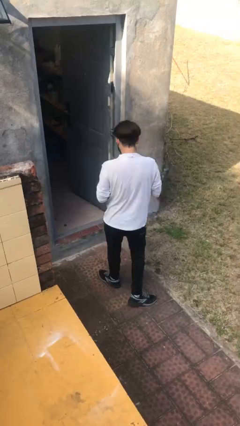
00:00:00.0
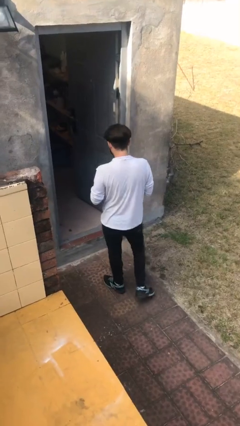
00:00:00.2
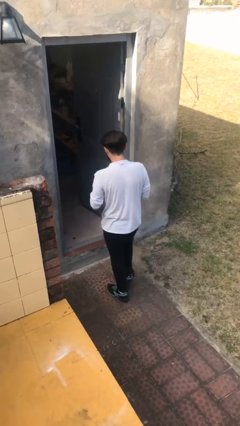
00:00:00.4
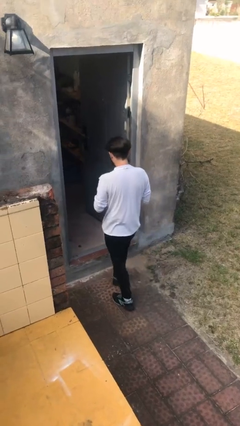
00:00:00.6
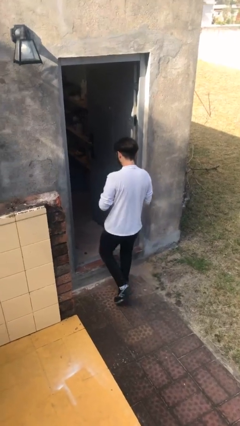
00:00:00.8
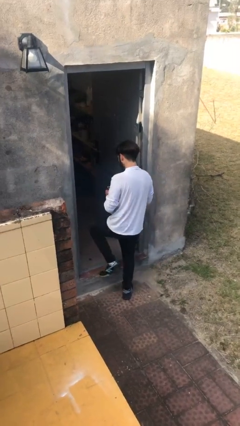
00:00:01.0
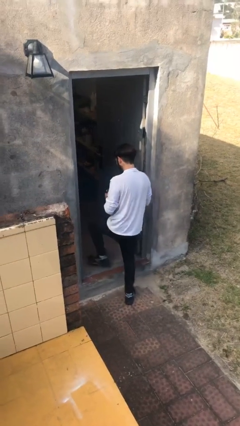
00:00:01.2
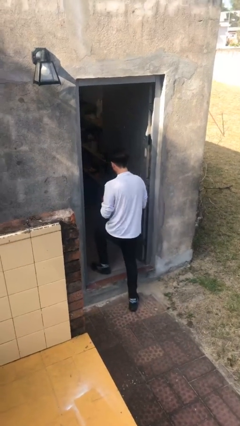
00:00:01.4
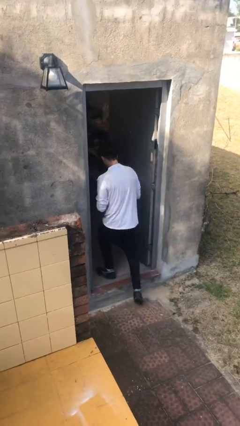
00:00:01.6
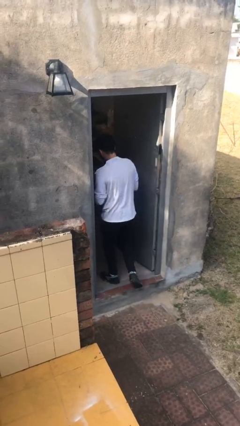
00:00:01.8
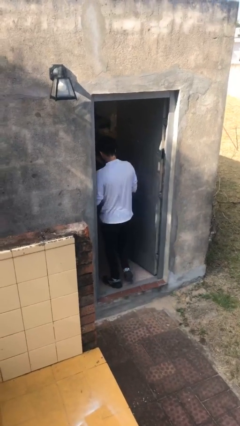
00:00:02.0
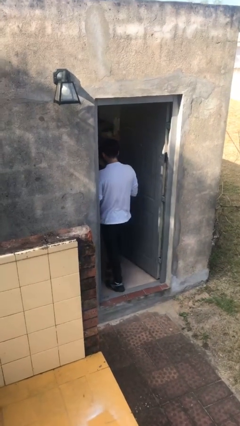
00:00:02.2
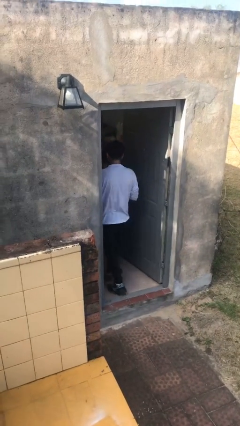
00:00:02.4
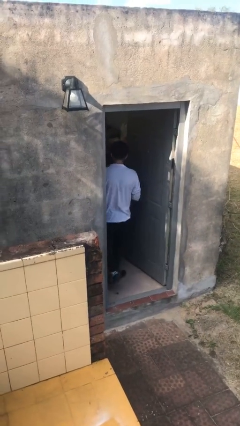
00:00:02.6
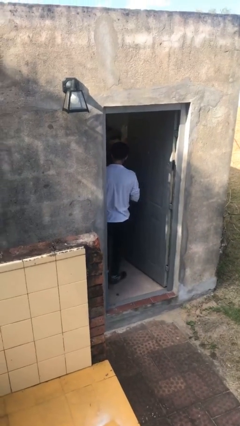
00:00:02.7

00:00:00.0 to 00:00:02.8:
person exits scene through structure

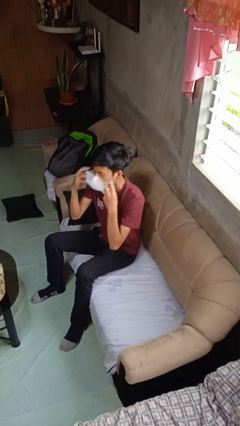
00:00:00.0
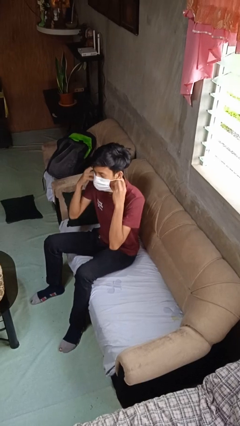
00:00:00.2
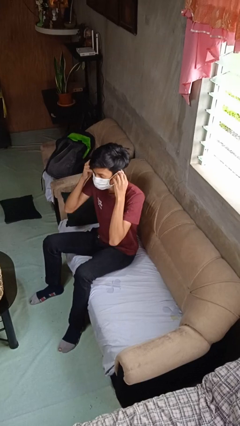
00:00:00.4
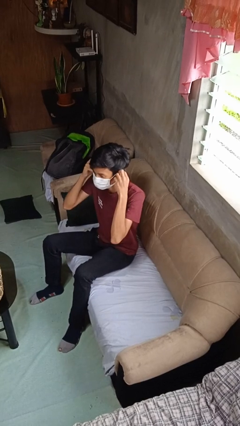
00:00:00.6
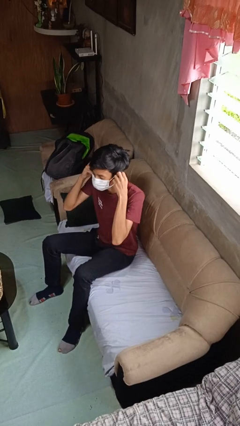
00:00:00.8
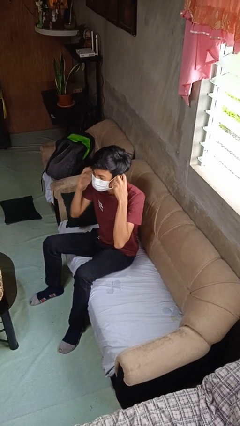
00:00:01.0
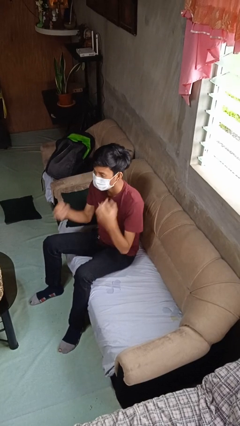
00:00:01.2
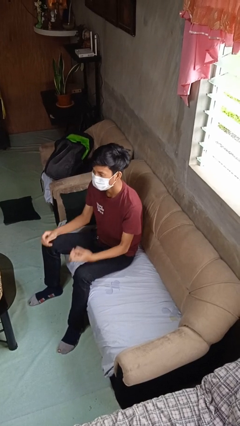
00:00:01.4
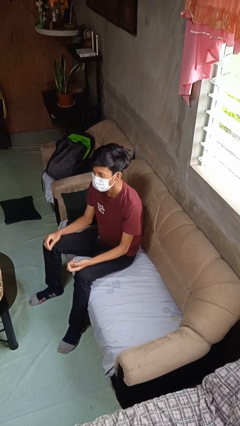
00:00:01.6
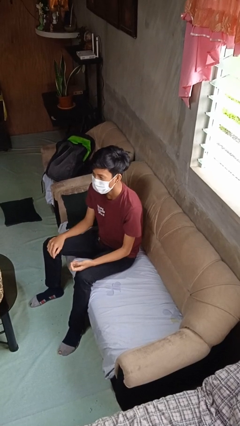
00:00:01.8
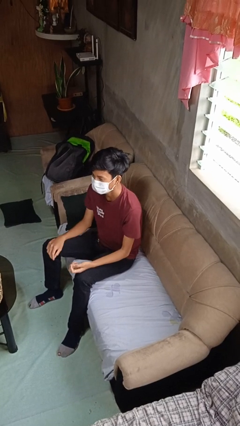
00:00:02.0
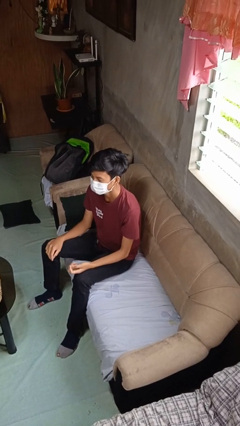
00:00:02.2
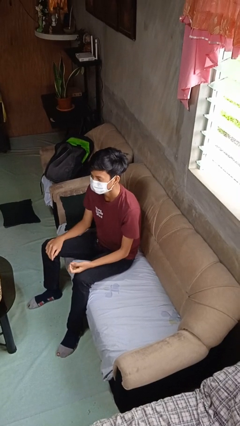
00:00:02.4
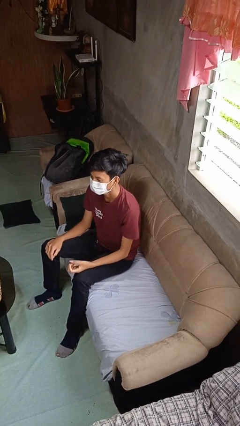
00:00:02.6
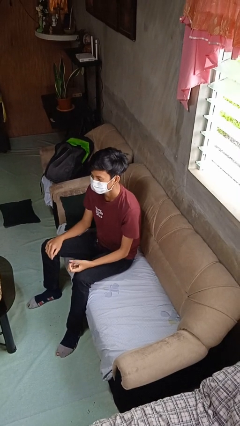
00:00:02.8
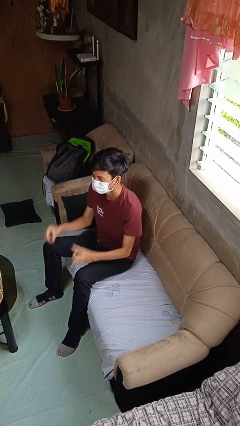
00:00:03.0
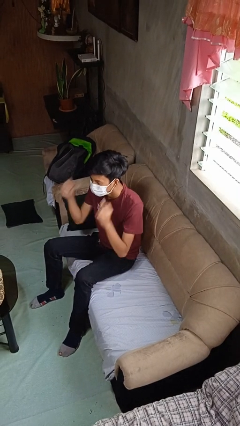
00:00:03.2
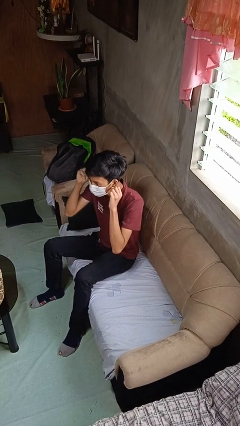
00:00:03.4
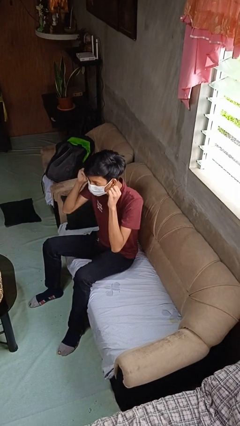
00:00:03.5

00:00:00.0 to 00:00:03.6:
person puts on facemask

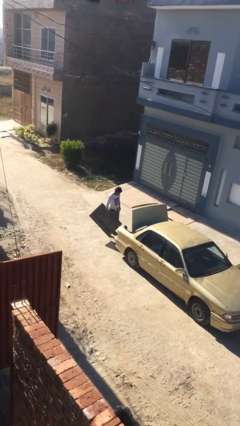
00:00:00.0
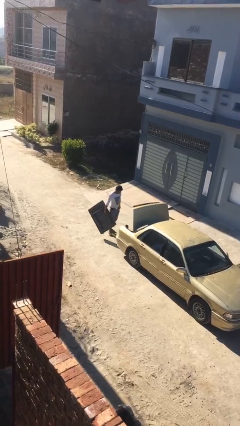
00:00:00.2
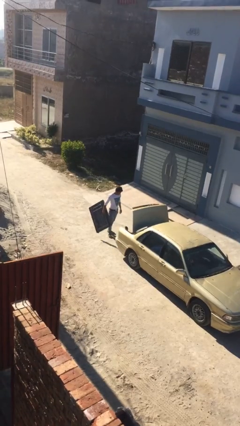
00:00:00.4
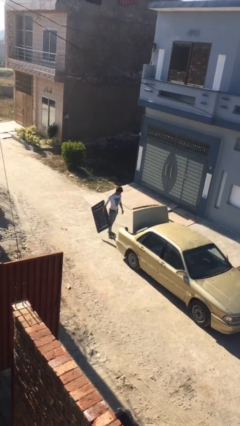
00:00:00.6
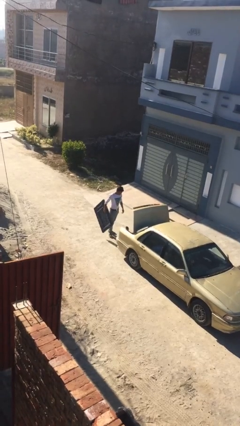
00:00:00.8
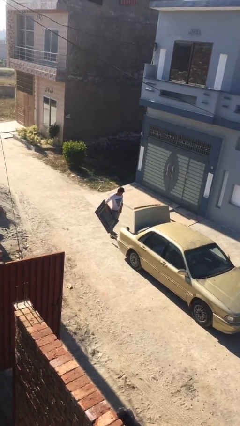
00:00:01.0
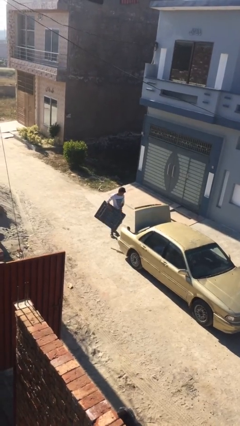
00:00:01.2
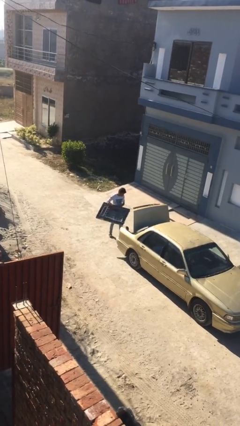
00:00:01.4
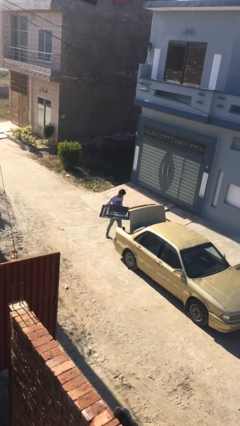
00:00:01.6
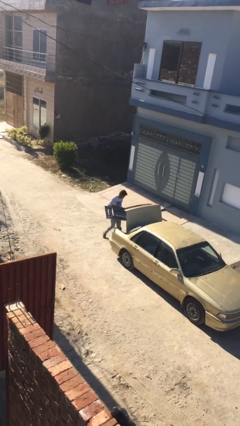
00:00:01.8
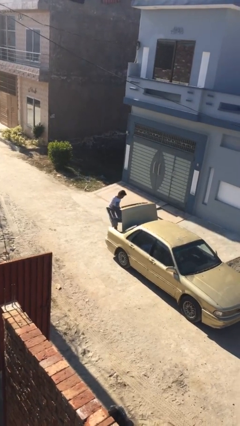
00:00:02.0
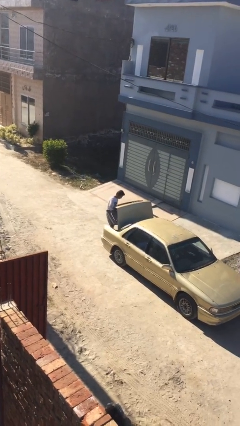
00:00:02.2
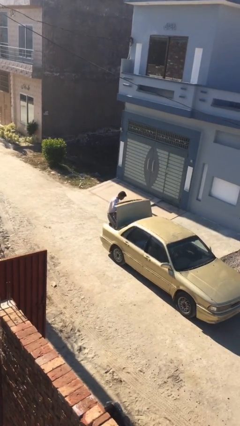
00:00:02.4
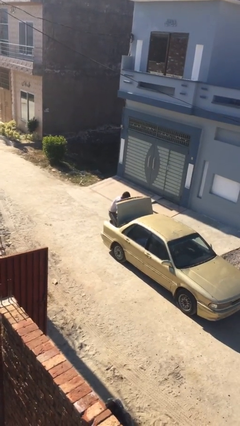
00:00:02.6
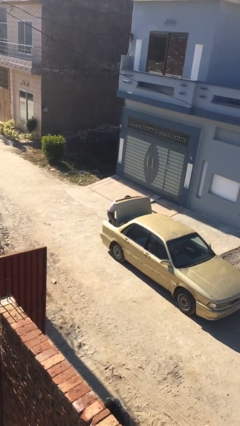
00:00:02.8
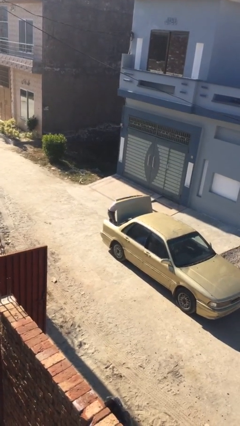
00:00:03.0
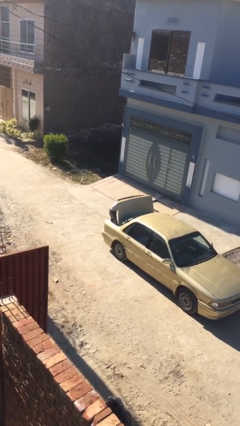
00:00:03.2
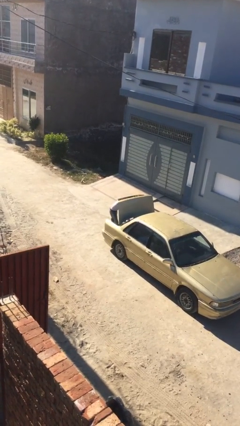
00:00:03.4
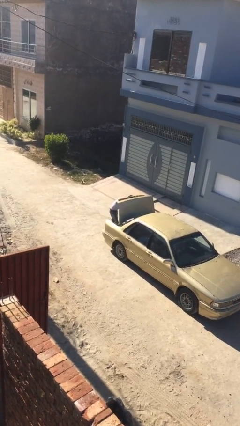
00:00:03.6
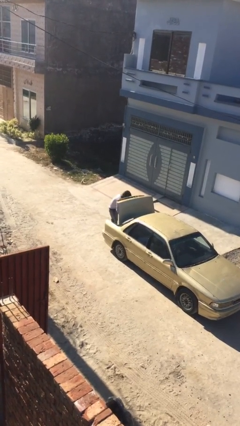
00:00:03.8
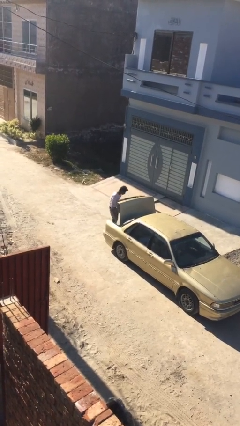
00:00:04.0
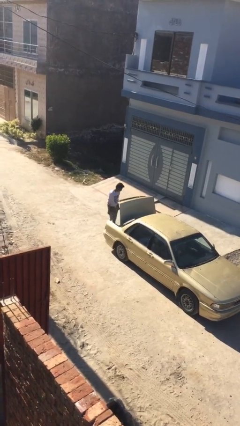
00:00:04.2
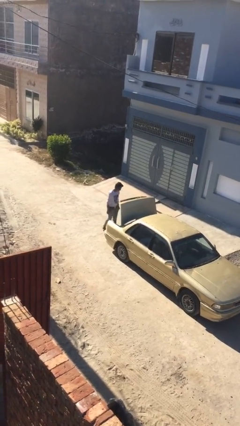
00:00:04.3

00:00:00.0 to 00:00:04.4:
person loads car

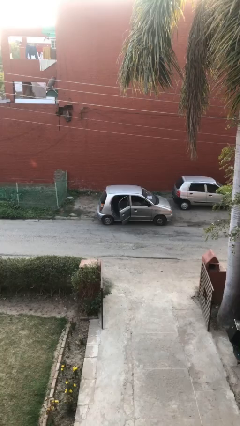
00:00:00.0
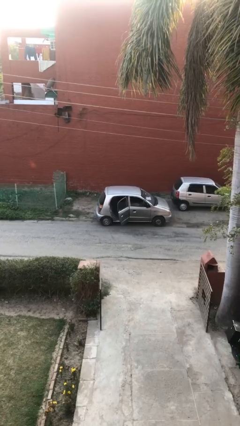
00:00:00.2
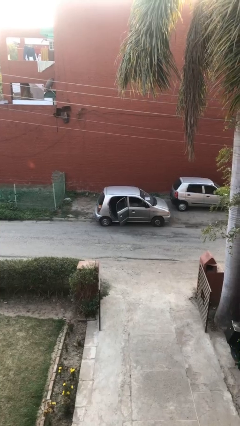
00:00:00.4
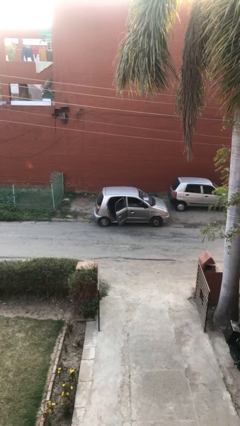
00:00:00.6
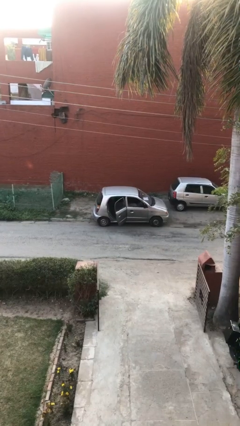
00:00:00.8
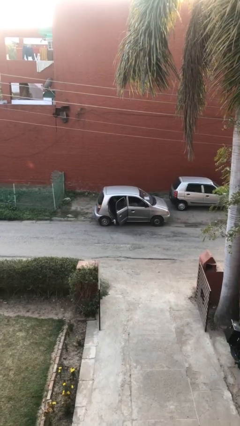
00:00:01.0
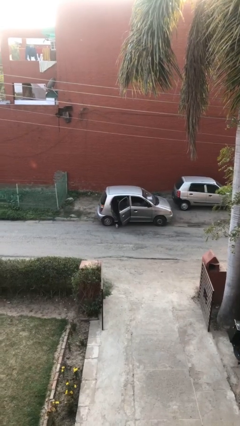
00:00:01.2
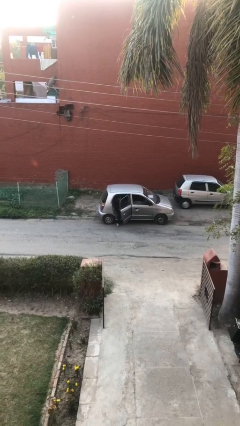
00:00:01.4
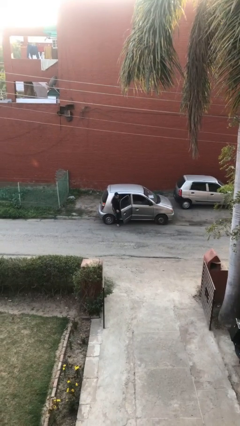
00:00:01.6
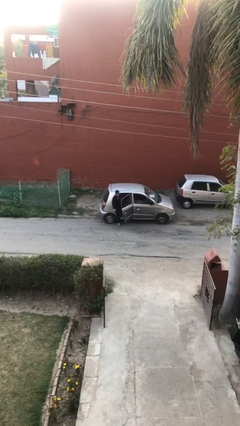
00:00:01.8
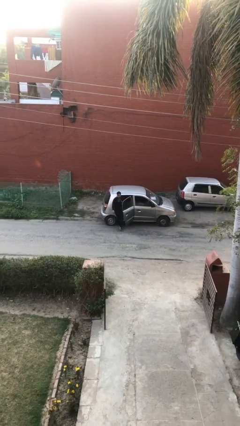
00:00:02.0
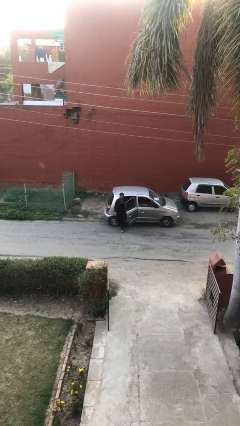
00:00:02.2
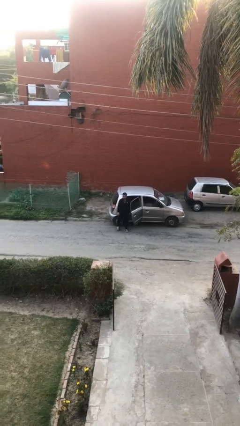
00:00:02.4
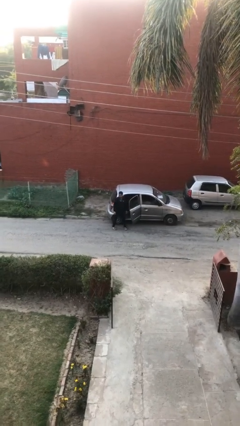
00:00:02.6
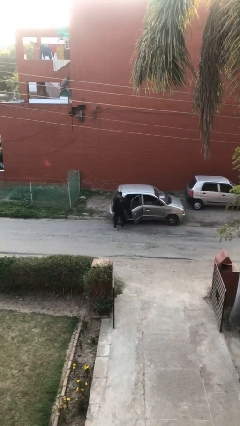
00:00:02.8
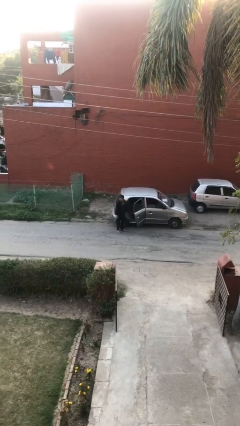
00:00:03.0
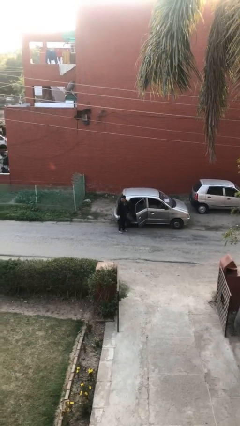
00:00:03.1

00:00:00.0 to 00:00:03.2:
person exits car

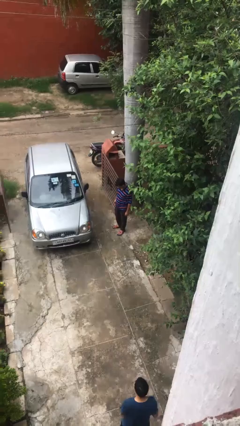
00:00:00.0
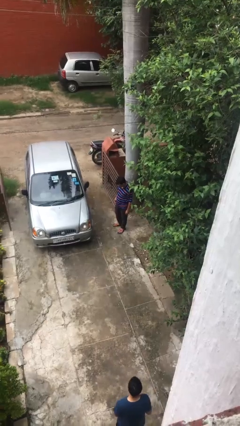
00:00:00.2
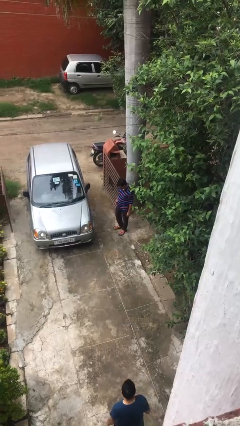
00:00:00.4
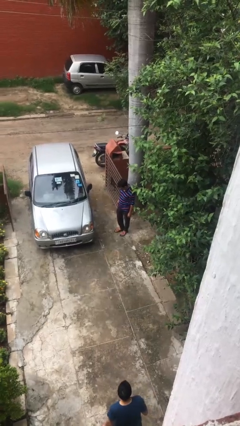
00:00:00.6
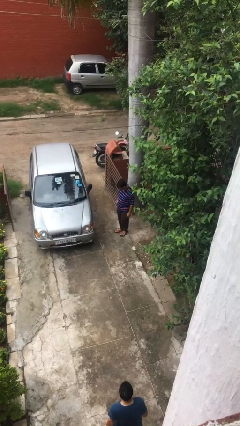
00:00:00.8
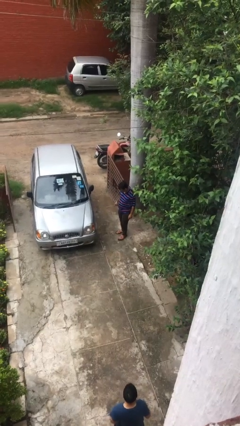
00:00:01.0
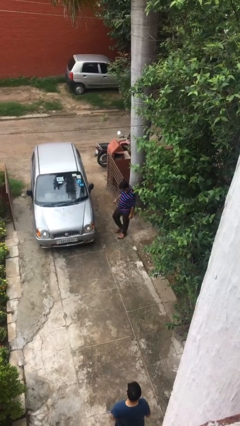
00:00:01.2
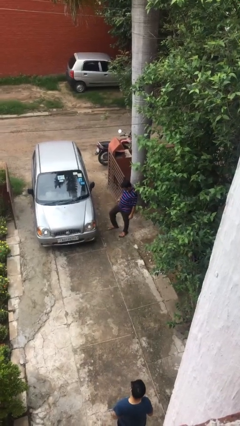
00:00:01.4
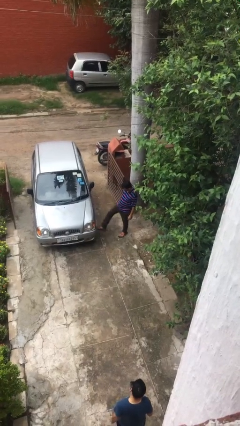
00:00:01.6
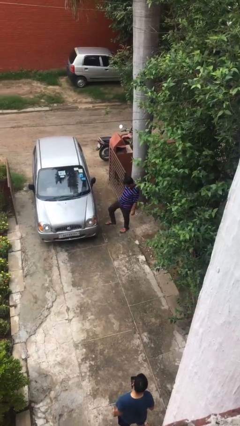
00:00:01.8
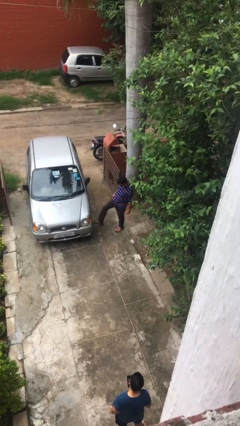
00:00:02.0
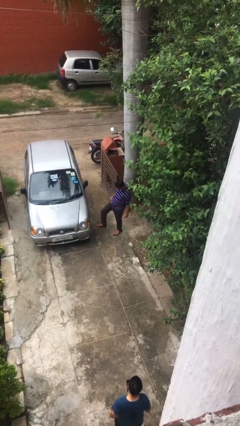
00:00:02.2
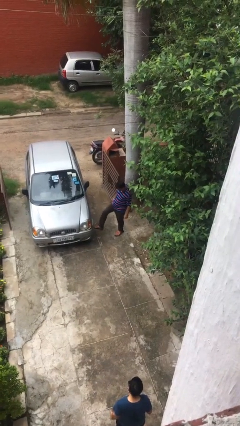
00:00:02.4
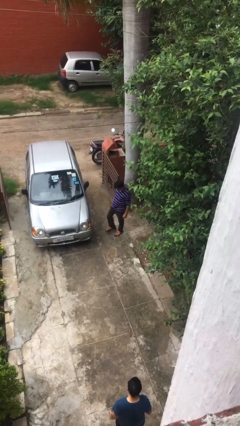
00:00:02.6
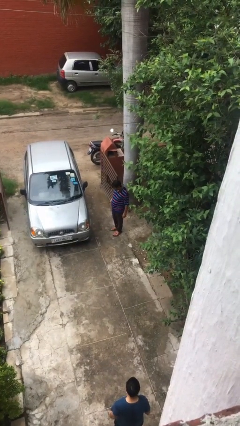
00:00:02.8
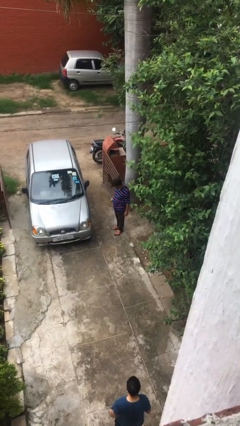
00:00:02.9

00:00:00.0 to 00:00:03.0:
person kicks car tires

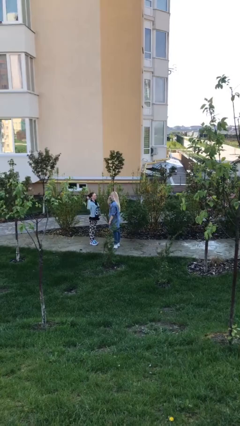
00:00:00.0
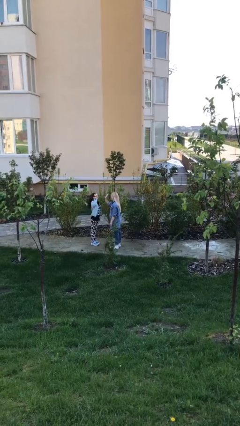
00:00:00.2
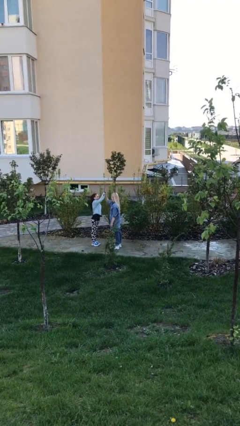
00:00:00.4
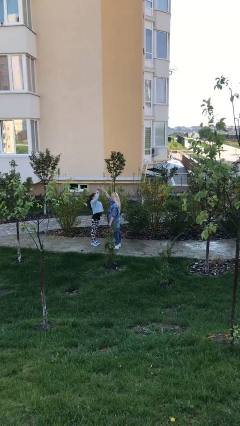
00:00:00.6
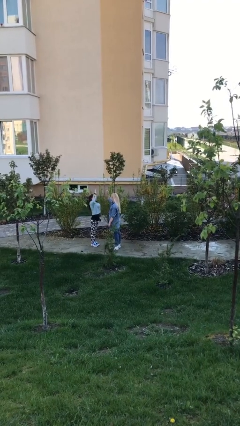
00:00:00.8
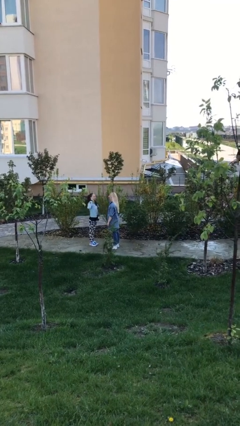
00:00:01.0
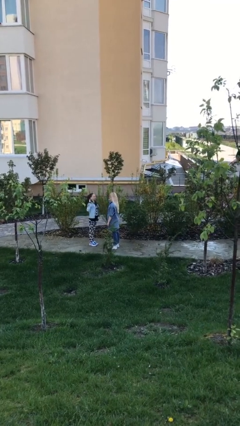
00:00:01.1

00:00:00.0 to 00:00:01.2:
person highfives hand
